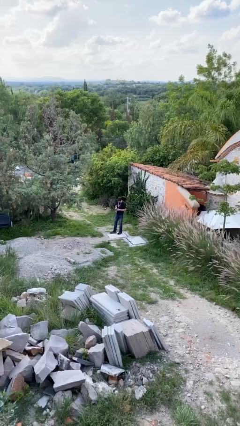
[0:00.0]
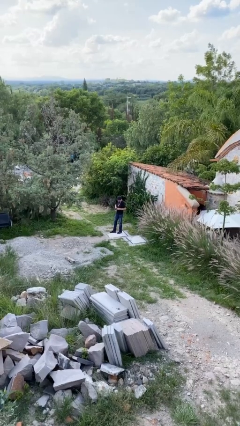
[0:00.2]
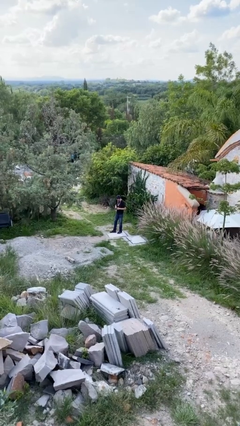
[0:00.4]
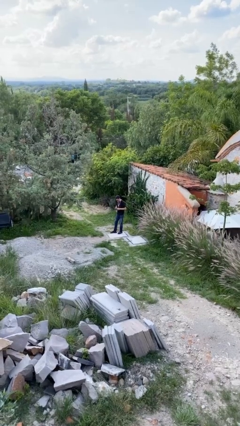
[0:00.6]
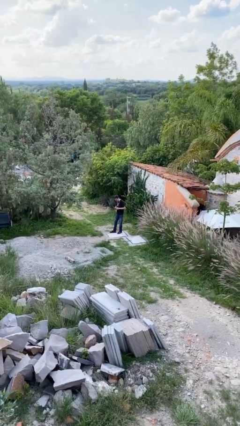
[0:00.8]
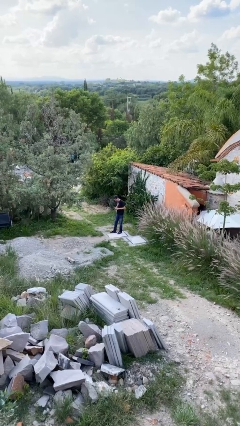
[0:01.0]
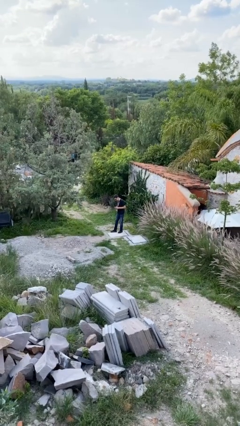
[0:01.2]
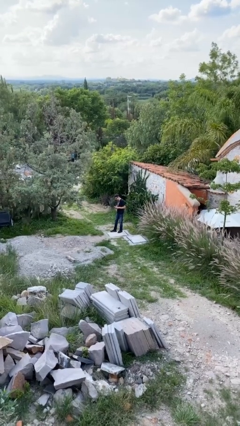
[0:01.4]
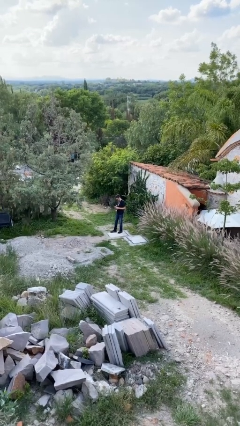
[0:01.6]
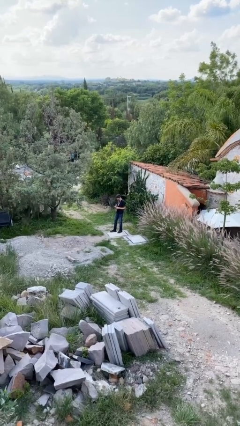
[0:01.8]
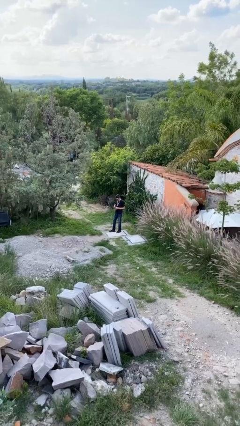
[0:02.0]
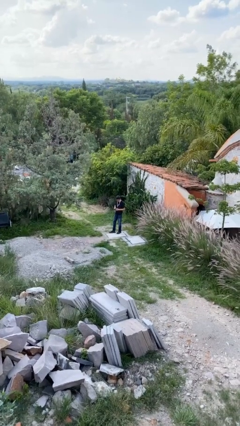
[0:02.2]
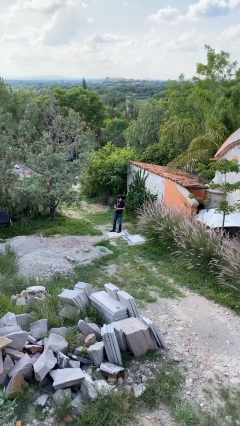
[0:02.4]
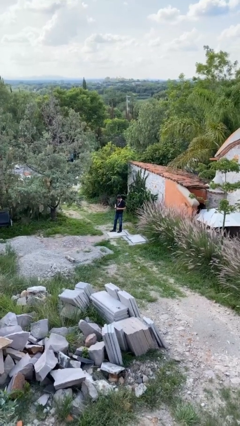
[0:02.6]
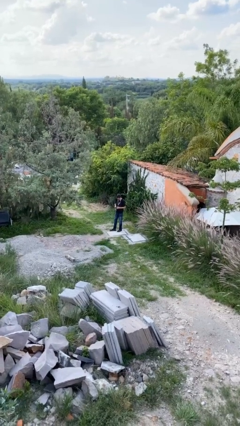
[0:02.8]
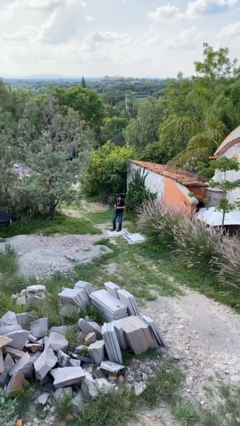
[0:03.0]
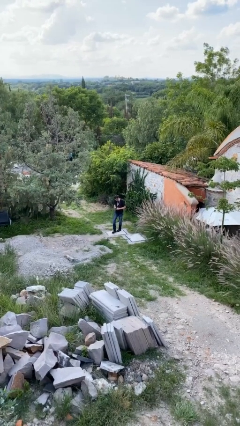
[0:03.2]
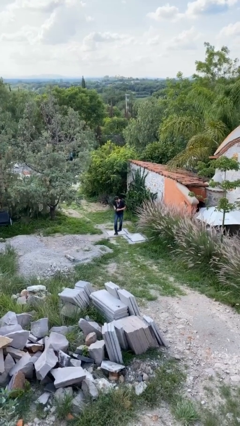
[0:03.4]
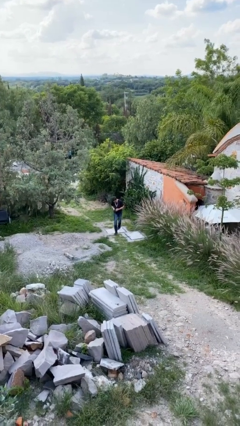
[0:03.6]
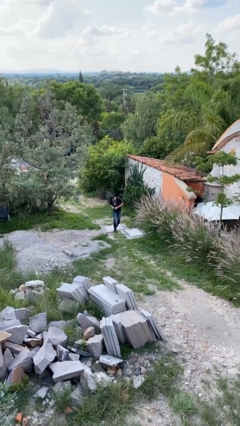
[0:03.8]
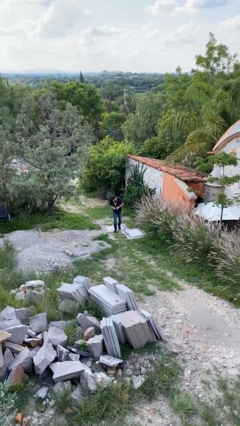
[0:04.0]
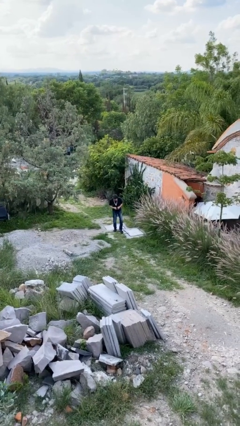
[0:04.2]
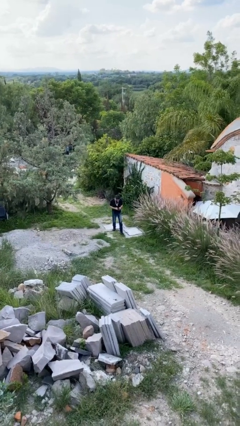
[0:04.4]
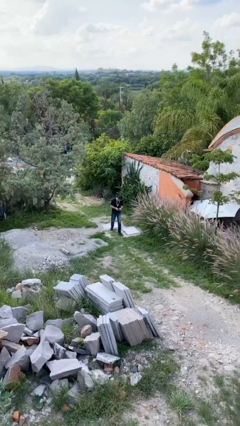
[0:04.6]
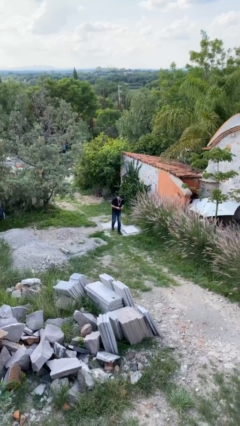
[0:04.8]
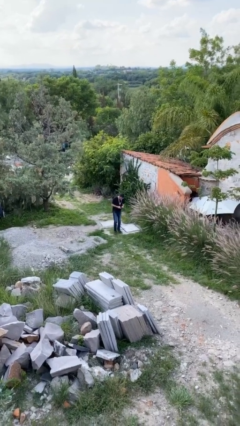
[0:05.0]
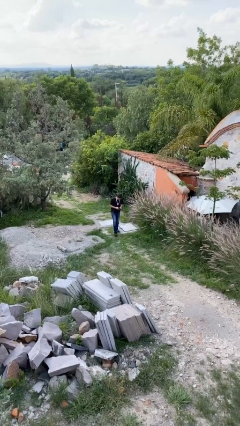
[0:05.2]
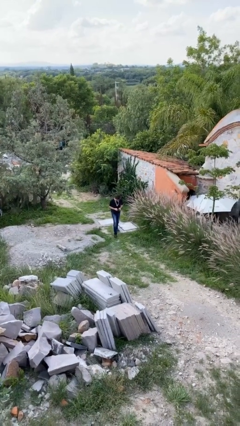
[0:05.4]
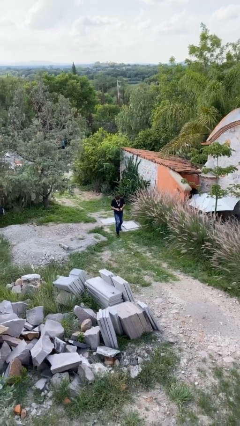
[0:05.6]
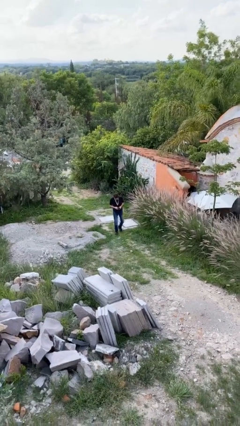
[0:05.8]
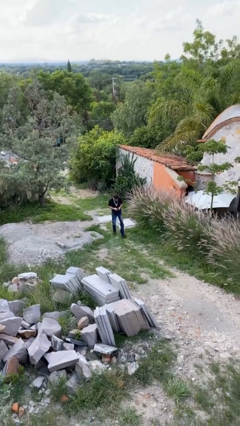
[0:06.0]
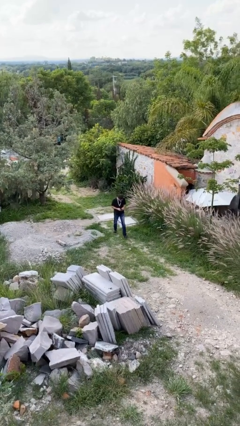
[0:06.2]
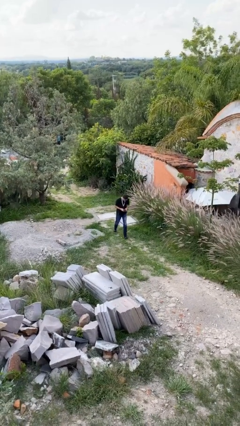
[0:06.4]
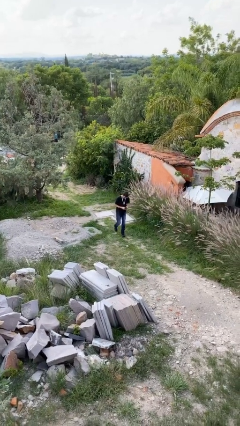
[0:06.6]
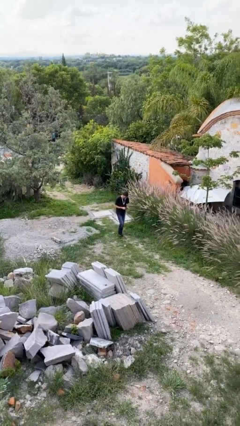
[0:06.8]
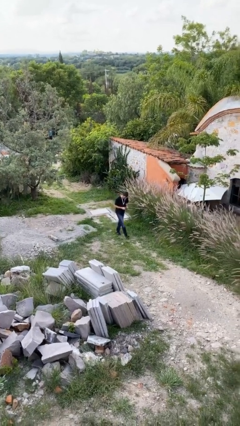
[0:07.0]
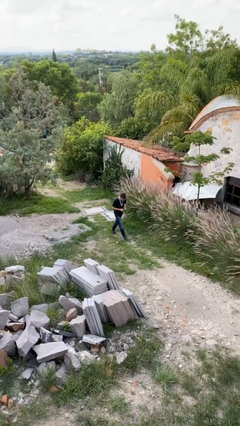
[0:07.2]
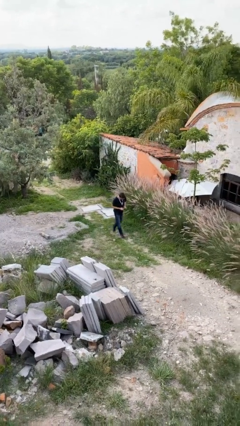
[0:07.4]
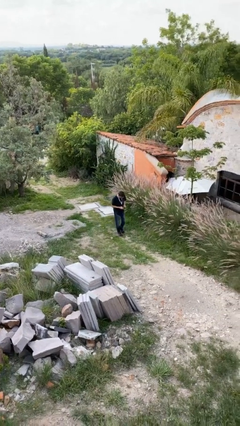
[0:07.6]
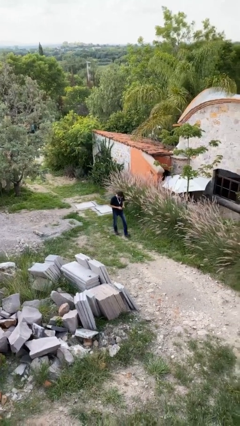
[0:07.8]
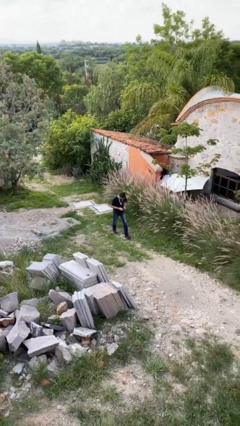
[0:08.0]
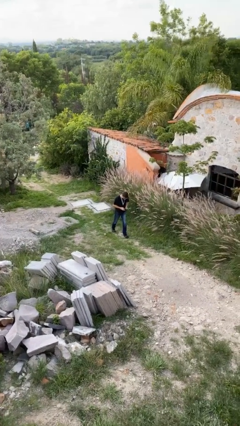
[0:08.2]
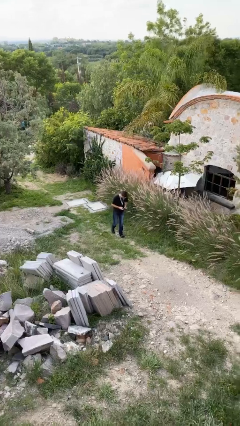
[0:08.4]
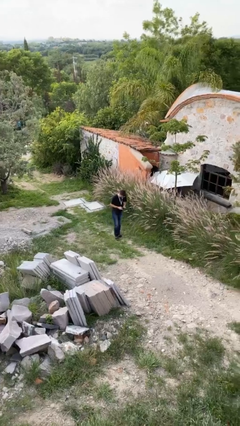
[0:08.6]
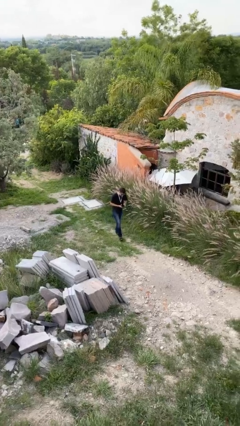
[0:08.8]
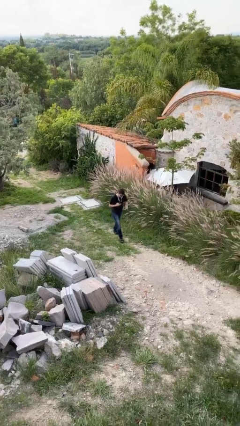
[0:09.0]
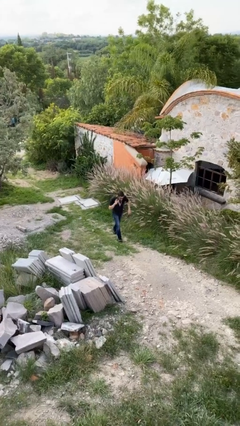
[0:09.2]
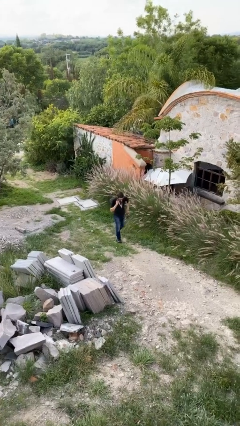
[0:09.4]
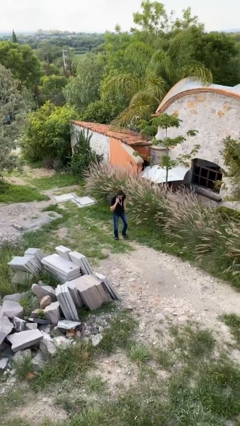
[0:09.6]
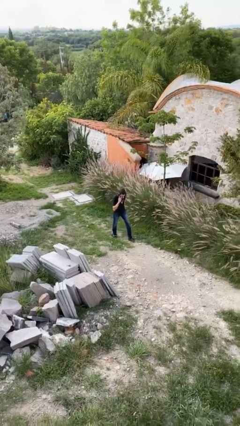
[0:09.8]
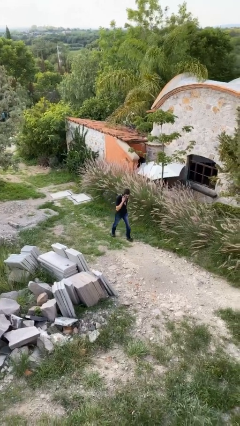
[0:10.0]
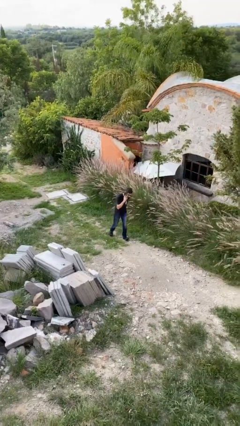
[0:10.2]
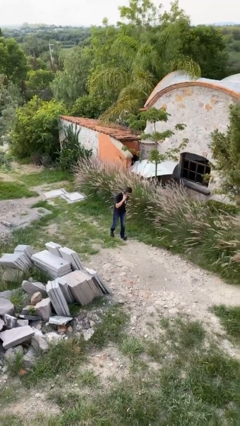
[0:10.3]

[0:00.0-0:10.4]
person texts on phone

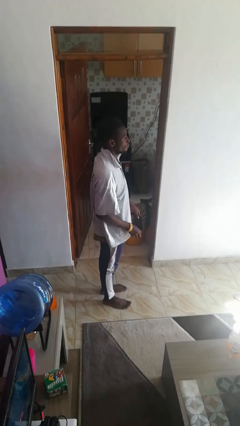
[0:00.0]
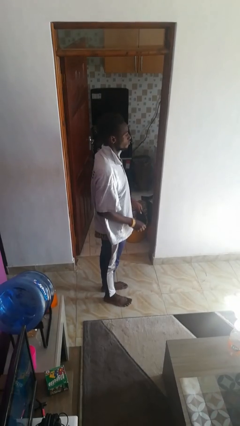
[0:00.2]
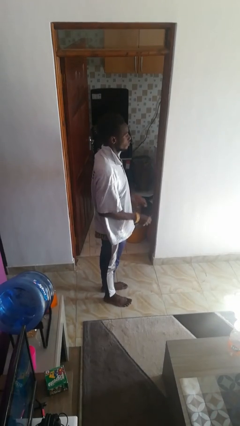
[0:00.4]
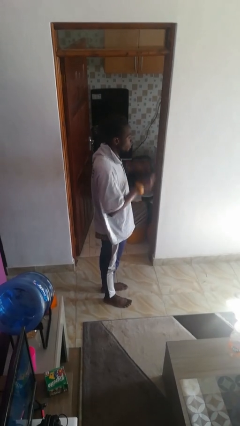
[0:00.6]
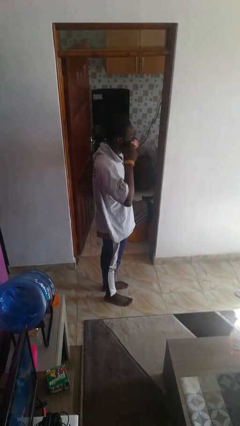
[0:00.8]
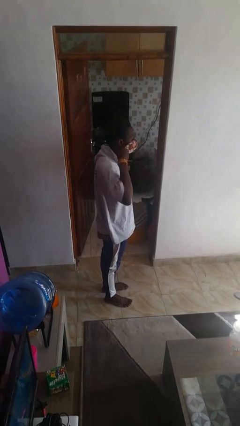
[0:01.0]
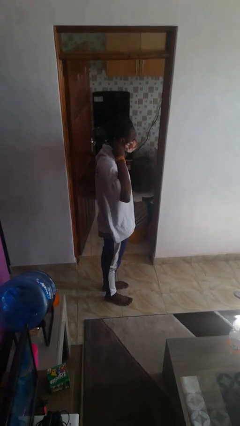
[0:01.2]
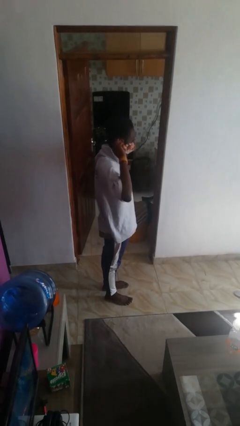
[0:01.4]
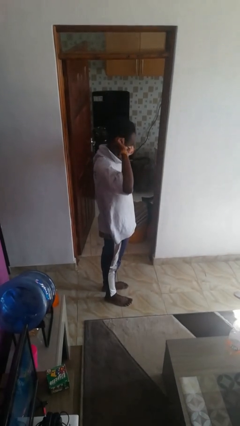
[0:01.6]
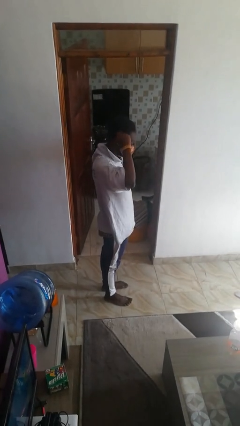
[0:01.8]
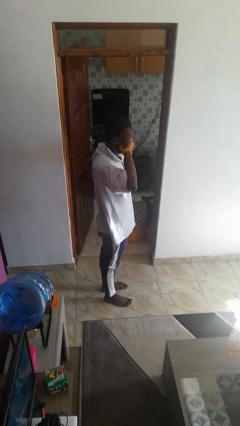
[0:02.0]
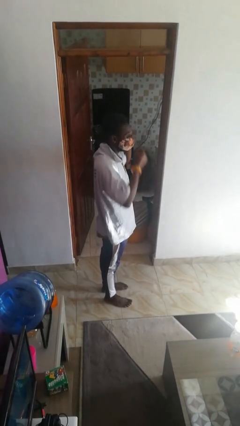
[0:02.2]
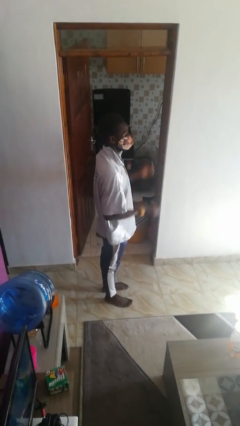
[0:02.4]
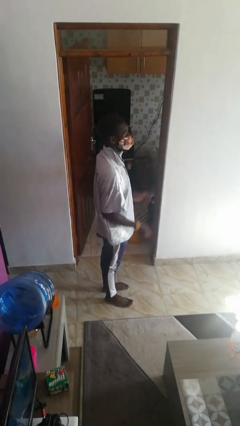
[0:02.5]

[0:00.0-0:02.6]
person puts on facemask

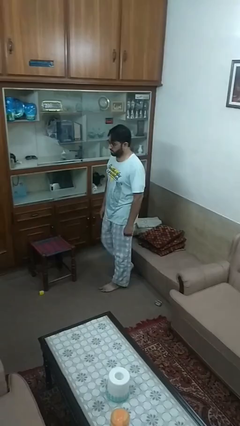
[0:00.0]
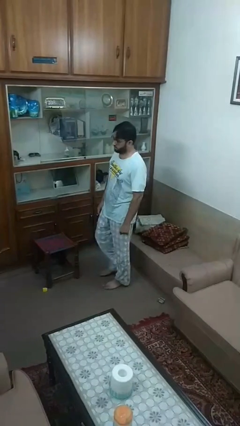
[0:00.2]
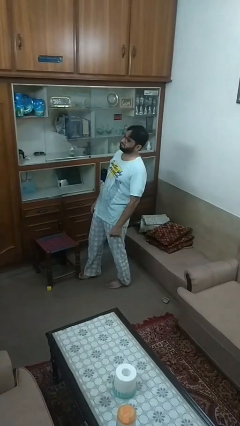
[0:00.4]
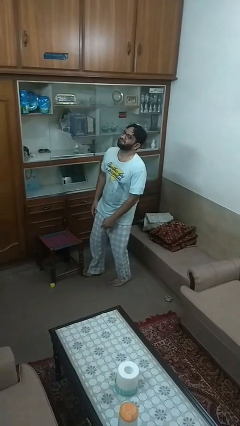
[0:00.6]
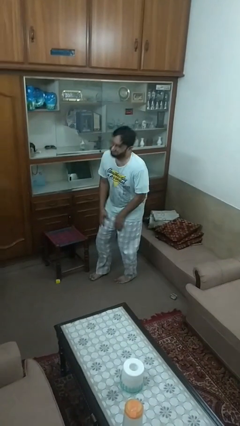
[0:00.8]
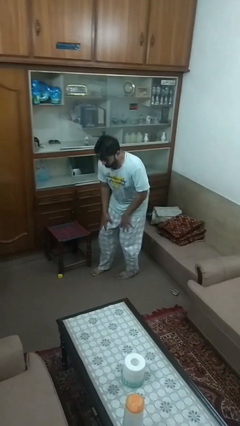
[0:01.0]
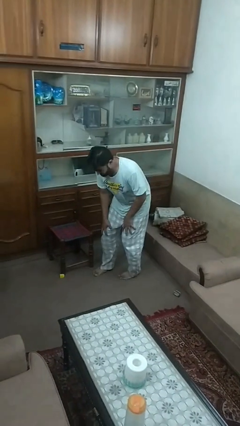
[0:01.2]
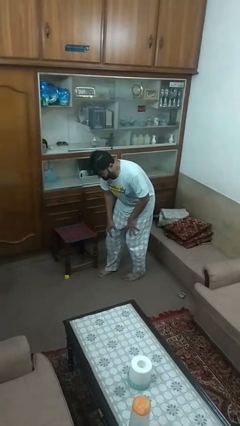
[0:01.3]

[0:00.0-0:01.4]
person trips on object on floor

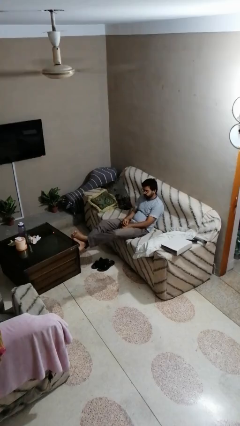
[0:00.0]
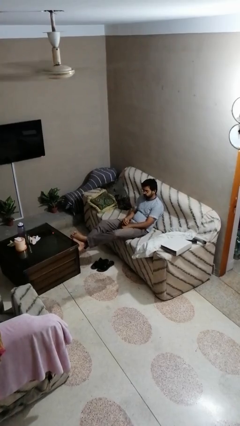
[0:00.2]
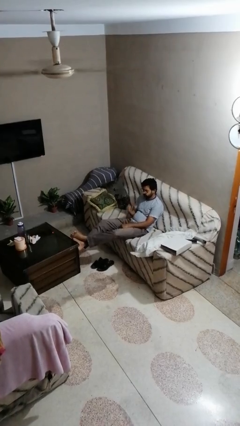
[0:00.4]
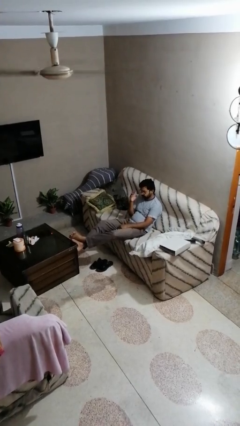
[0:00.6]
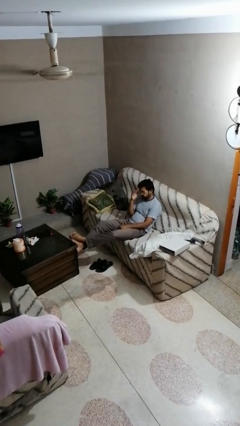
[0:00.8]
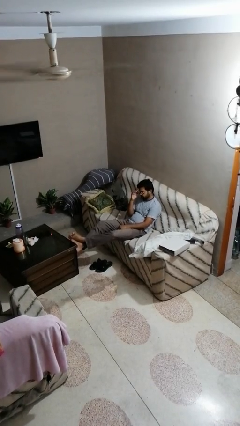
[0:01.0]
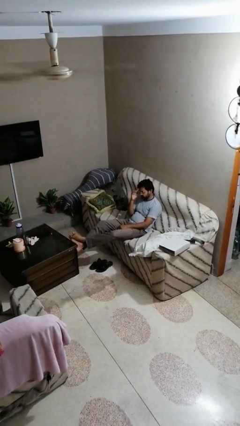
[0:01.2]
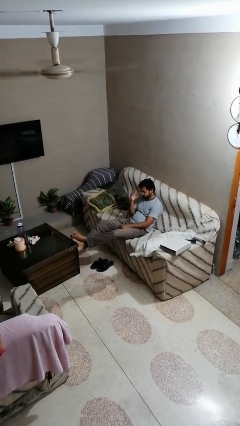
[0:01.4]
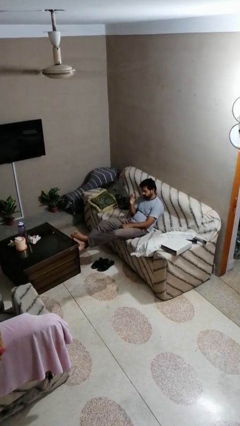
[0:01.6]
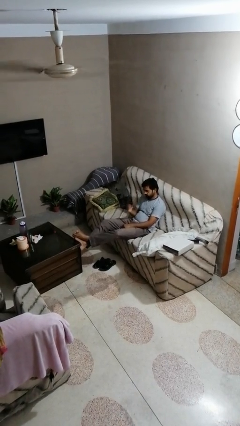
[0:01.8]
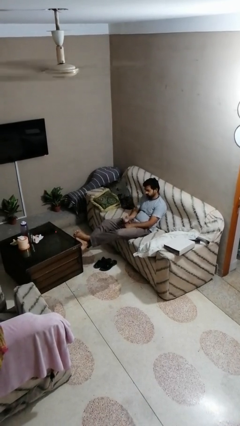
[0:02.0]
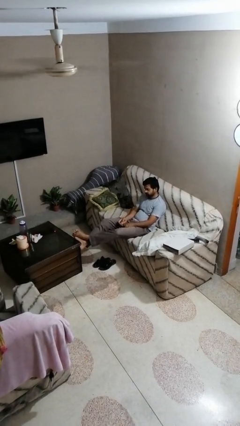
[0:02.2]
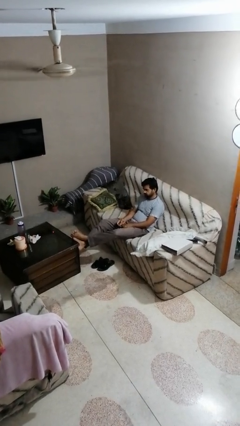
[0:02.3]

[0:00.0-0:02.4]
person takes off glasses

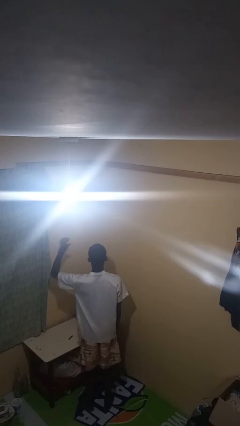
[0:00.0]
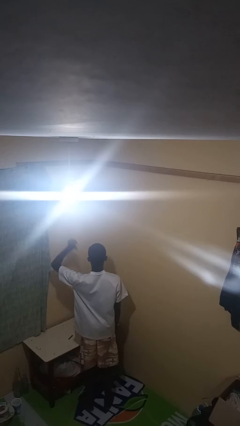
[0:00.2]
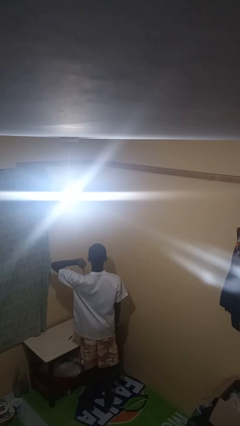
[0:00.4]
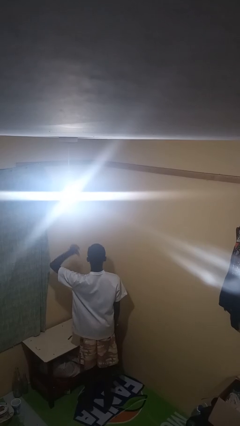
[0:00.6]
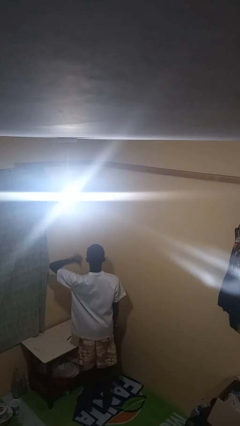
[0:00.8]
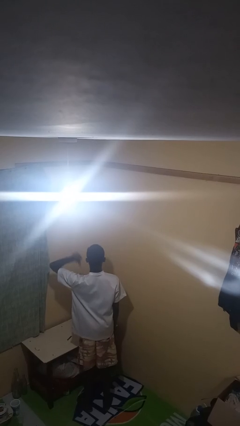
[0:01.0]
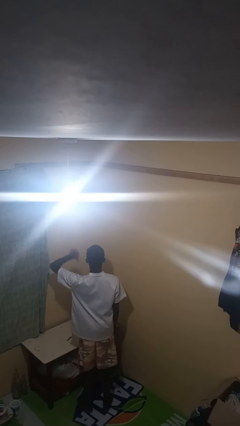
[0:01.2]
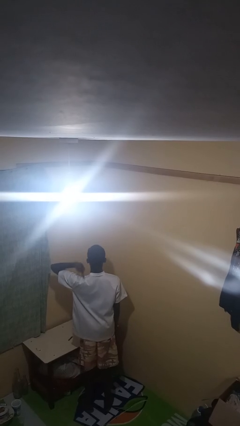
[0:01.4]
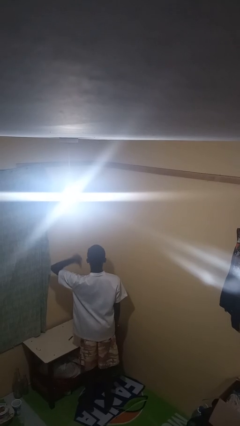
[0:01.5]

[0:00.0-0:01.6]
person gestures behind me
